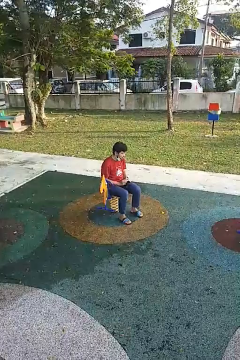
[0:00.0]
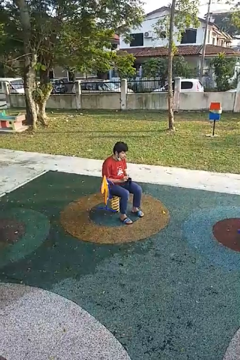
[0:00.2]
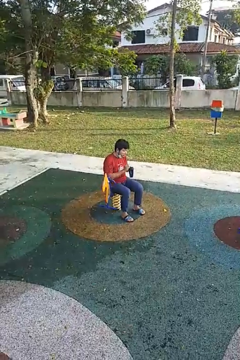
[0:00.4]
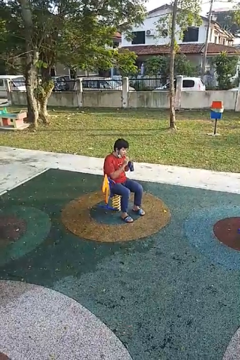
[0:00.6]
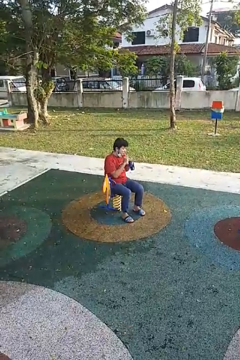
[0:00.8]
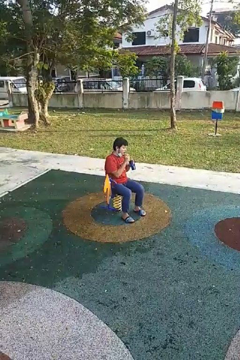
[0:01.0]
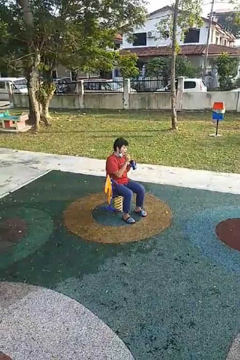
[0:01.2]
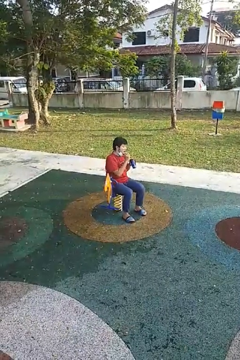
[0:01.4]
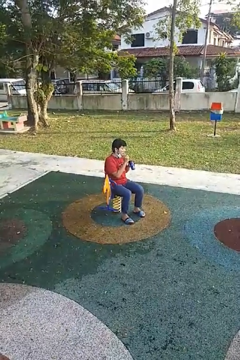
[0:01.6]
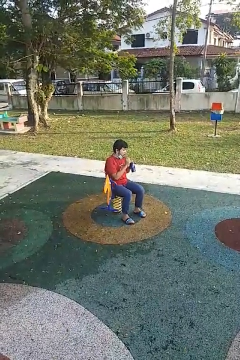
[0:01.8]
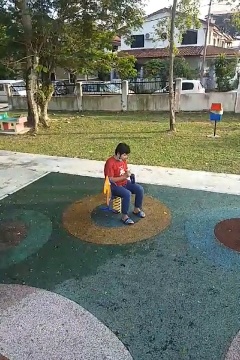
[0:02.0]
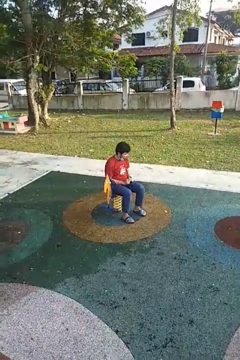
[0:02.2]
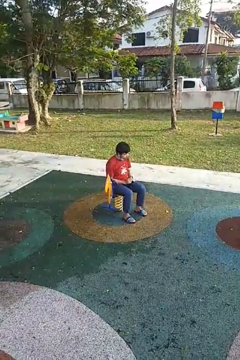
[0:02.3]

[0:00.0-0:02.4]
person drinks from straw

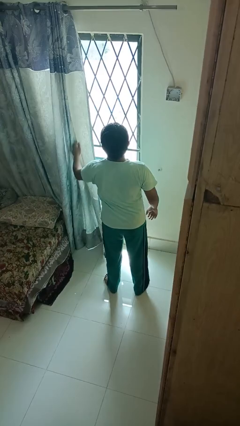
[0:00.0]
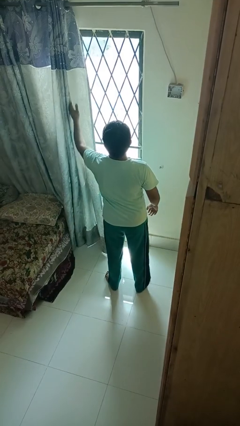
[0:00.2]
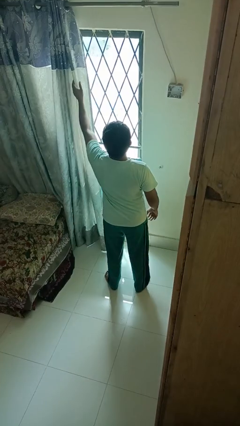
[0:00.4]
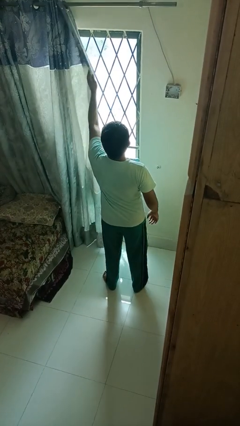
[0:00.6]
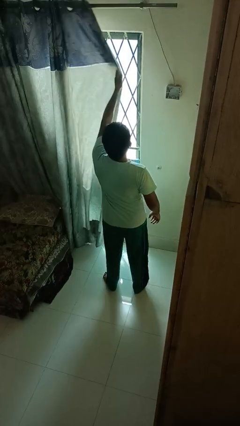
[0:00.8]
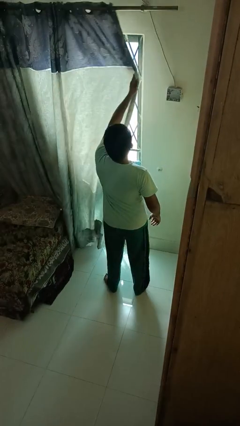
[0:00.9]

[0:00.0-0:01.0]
person closes curtains

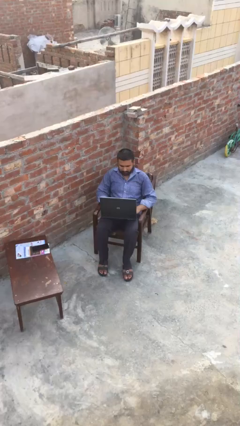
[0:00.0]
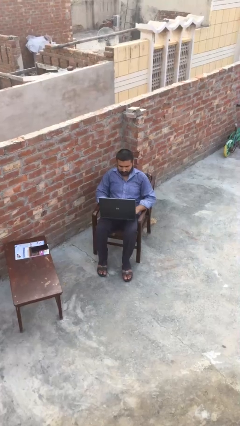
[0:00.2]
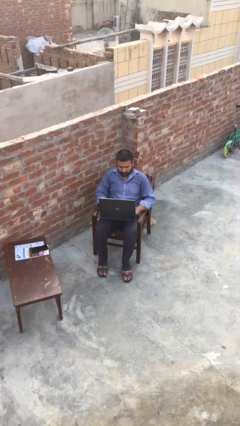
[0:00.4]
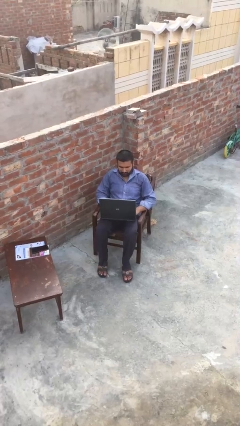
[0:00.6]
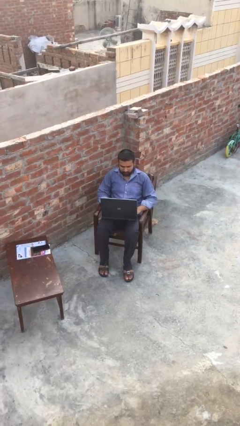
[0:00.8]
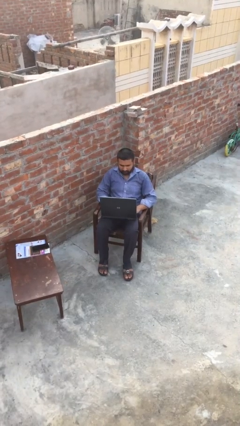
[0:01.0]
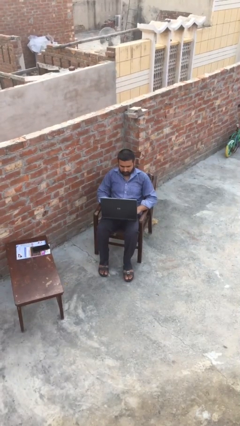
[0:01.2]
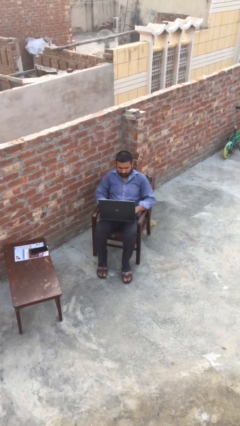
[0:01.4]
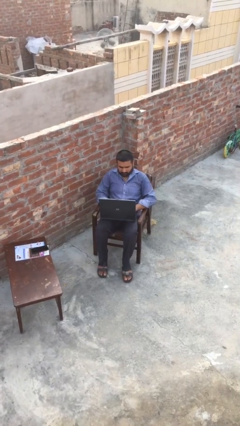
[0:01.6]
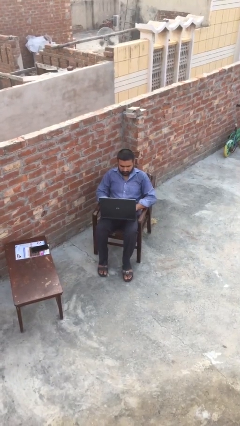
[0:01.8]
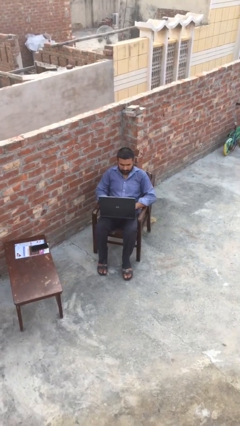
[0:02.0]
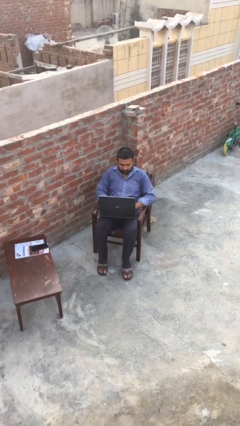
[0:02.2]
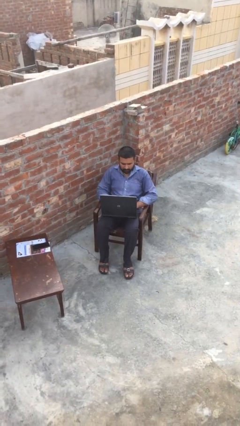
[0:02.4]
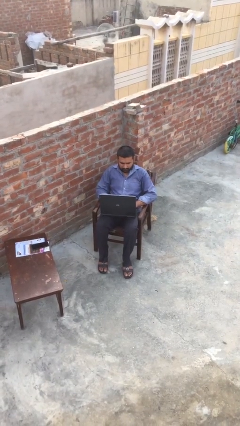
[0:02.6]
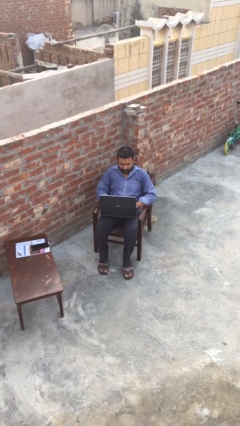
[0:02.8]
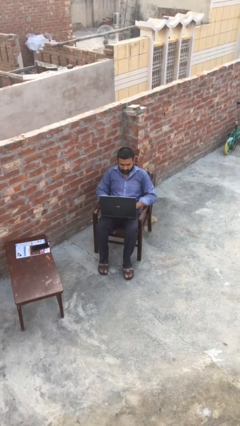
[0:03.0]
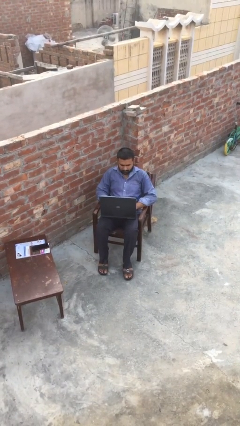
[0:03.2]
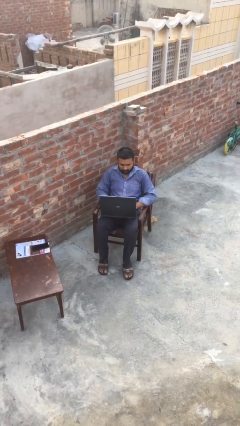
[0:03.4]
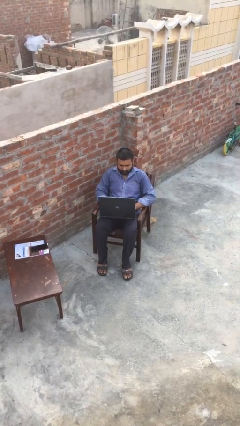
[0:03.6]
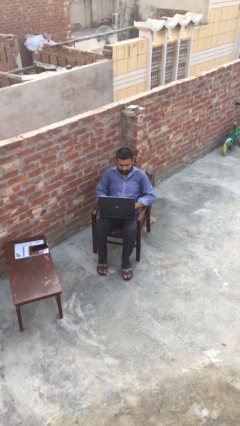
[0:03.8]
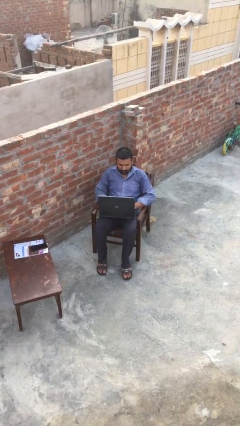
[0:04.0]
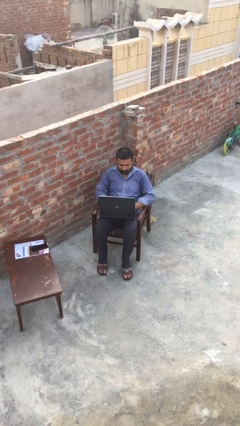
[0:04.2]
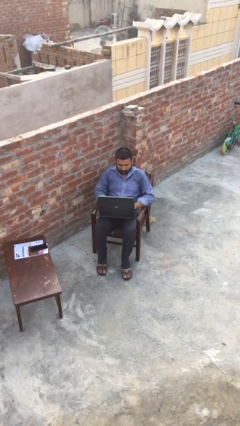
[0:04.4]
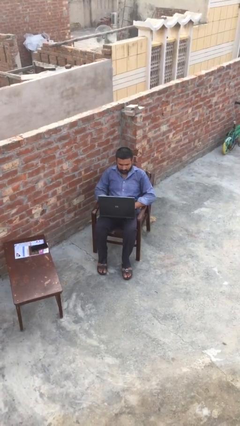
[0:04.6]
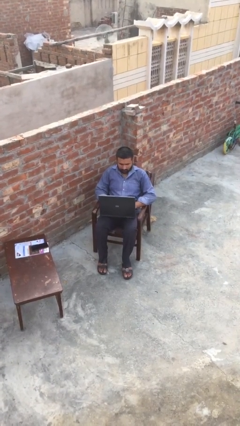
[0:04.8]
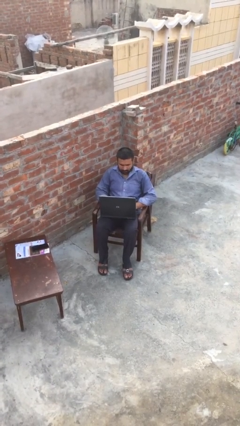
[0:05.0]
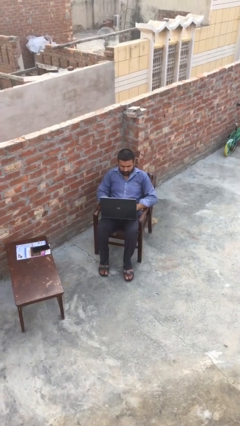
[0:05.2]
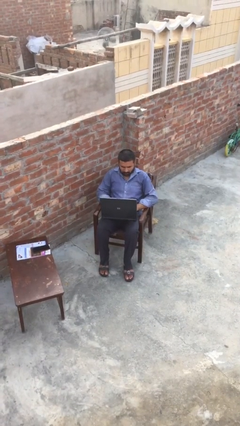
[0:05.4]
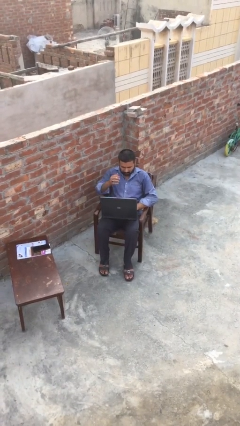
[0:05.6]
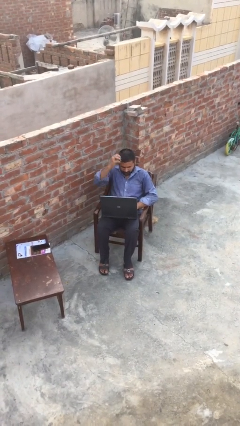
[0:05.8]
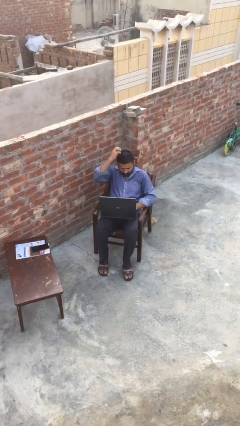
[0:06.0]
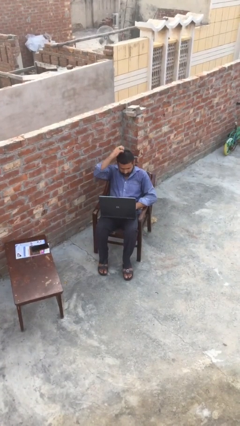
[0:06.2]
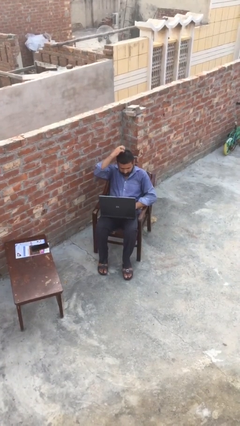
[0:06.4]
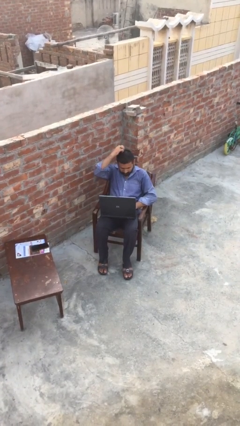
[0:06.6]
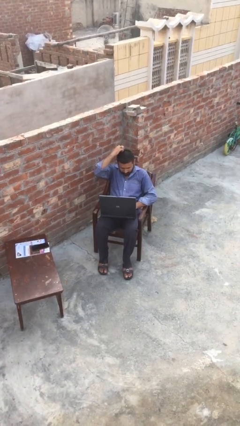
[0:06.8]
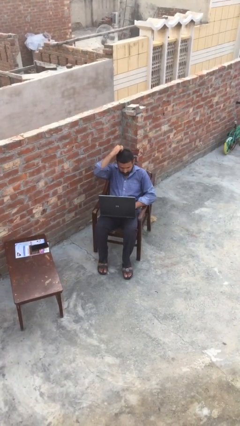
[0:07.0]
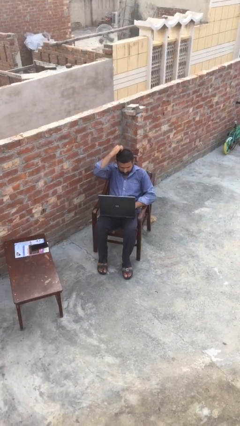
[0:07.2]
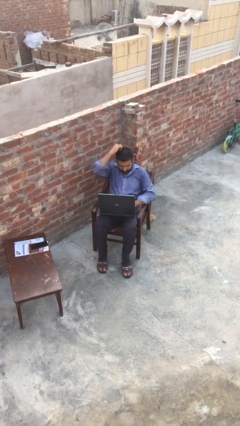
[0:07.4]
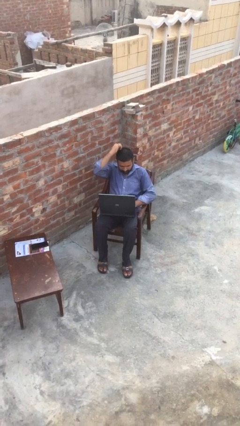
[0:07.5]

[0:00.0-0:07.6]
person interacts with laptop

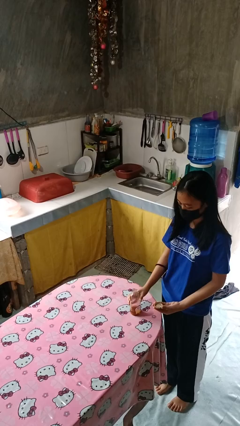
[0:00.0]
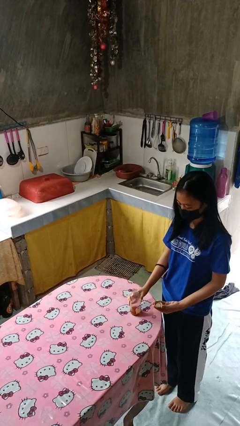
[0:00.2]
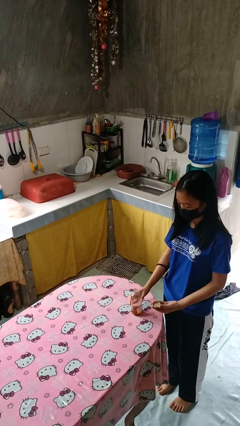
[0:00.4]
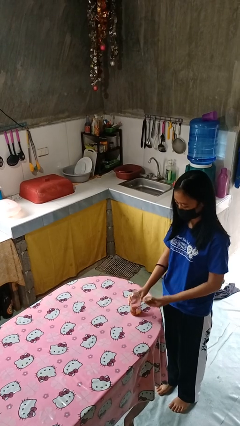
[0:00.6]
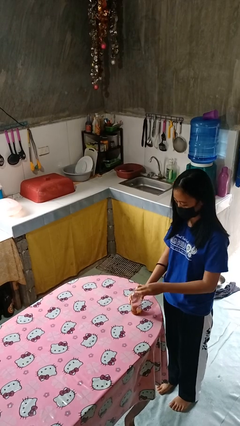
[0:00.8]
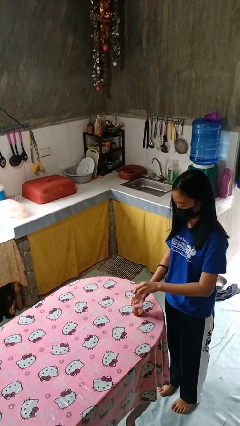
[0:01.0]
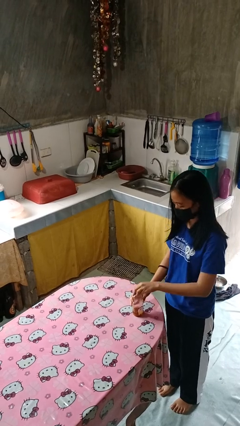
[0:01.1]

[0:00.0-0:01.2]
person closes jar

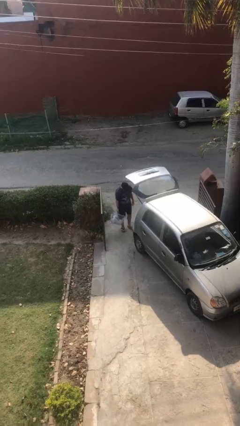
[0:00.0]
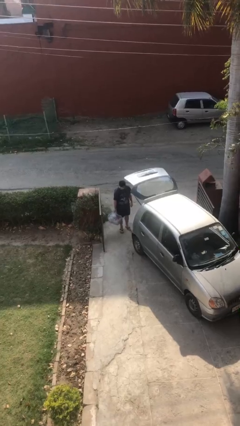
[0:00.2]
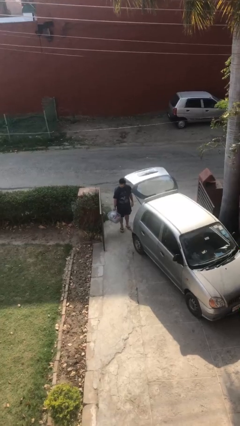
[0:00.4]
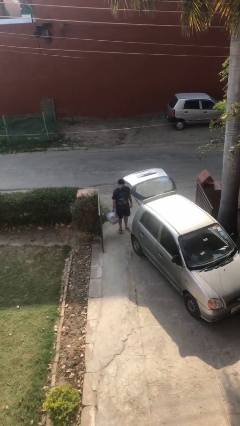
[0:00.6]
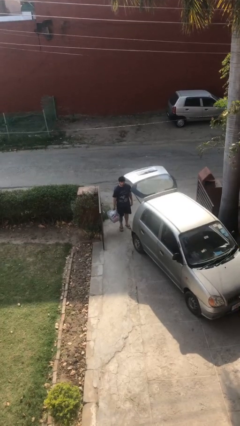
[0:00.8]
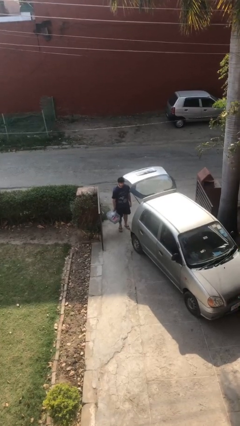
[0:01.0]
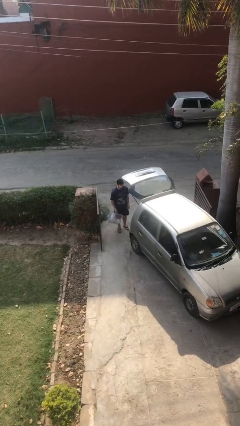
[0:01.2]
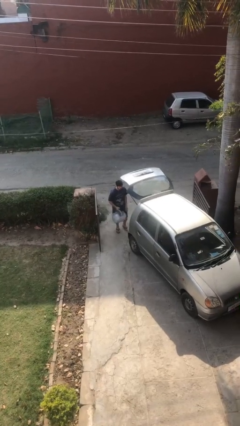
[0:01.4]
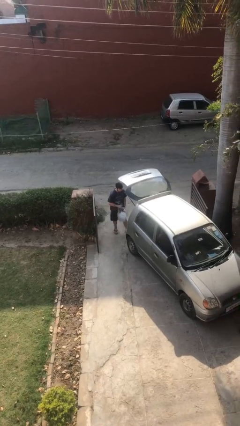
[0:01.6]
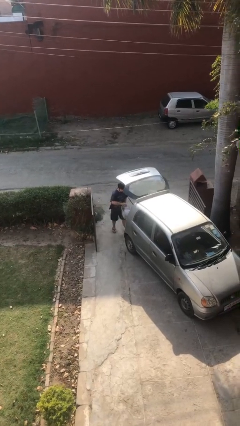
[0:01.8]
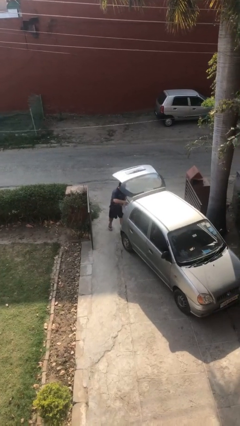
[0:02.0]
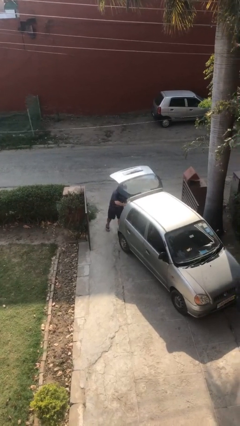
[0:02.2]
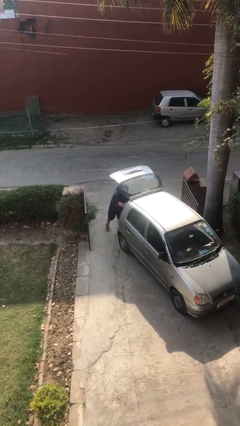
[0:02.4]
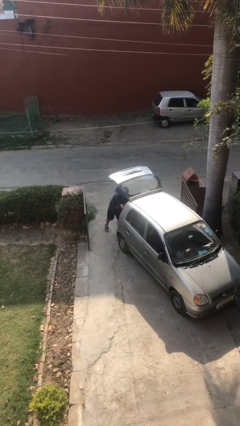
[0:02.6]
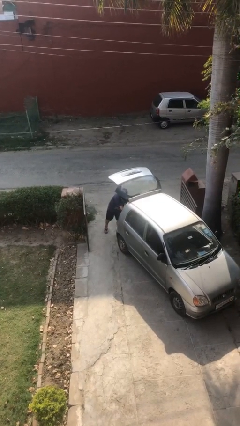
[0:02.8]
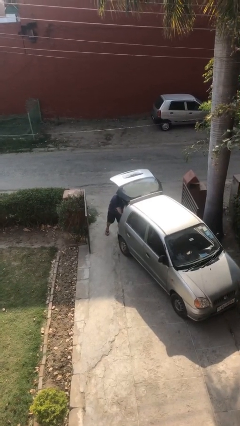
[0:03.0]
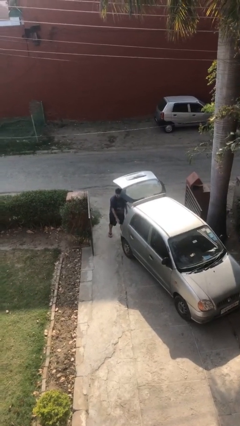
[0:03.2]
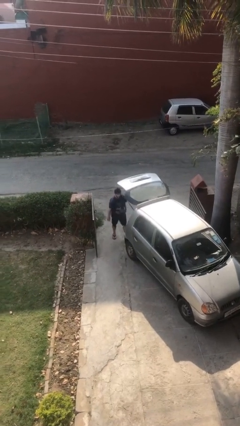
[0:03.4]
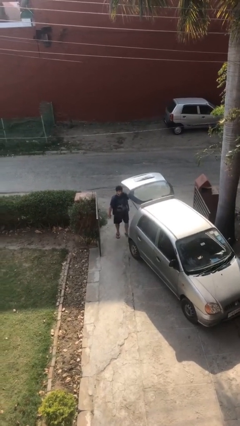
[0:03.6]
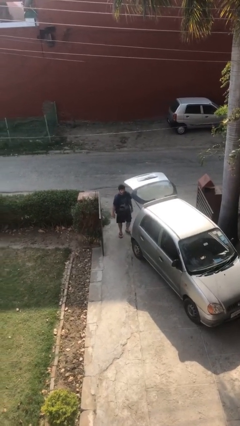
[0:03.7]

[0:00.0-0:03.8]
person loads car

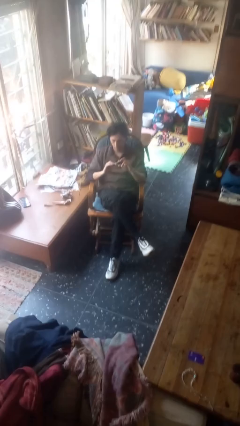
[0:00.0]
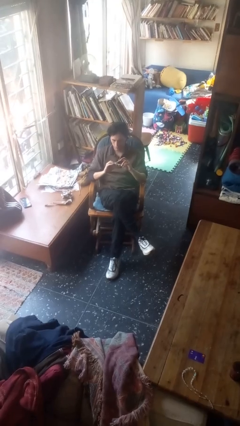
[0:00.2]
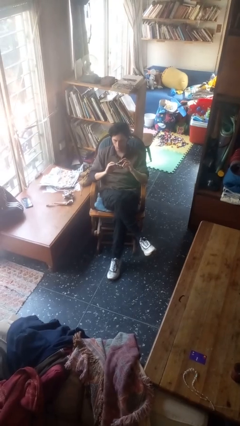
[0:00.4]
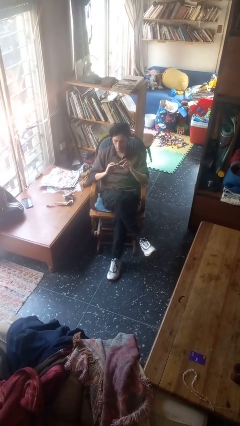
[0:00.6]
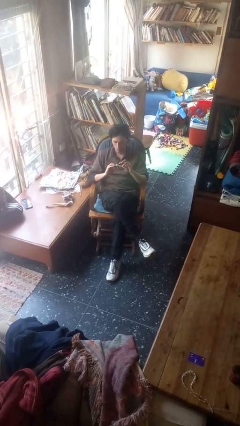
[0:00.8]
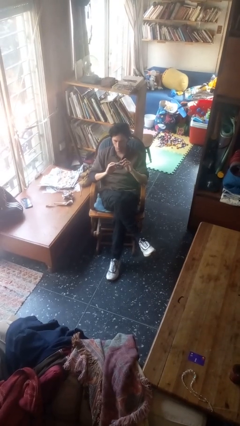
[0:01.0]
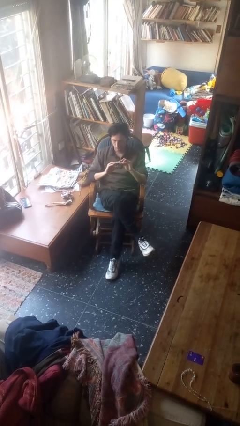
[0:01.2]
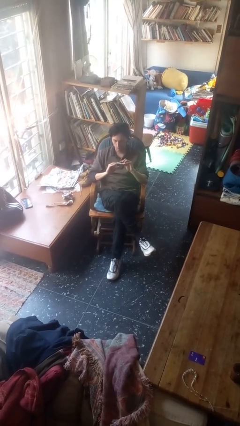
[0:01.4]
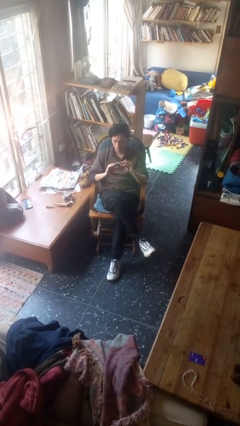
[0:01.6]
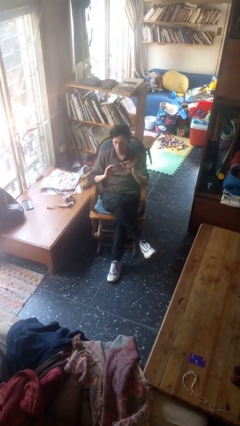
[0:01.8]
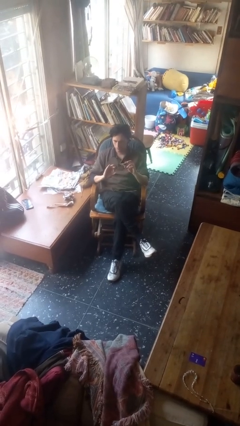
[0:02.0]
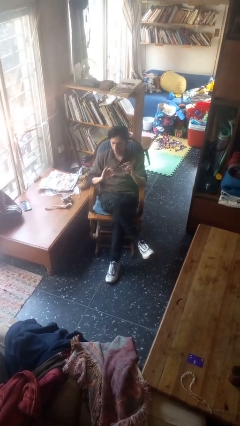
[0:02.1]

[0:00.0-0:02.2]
person clips fingernails
